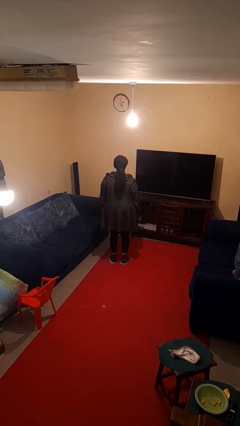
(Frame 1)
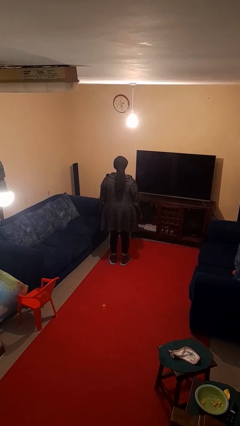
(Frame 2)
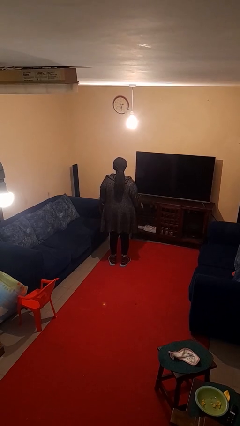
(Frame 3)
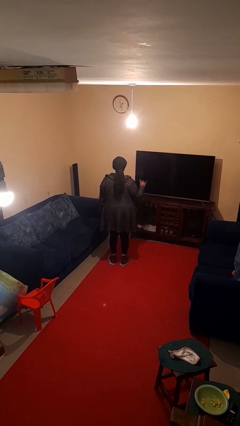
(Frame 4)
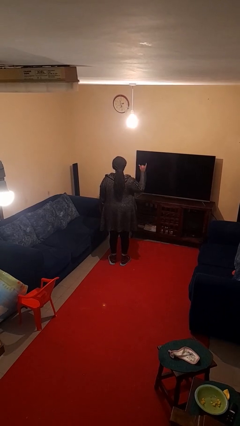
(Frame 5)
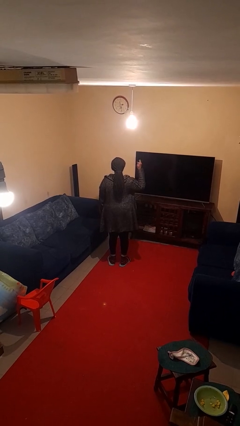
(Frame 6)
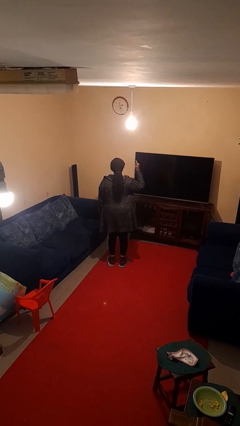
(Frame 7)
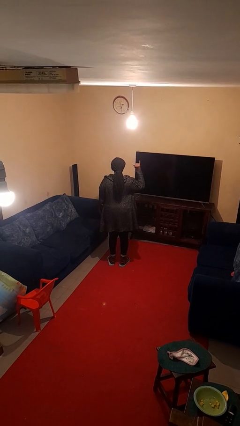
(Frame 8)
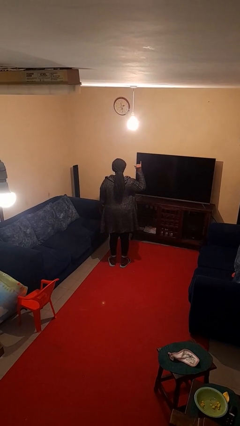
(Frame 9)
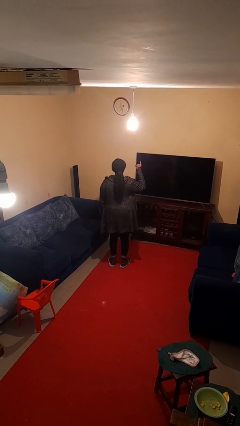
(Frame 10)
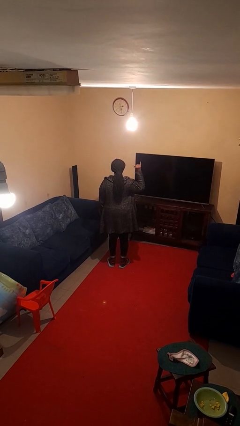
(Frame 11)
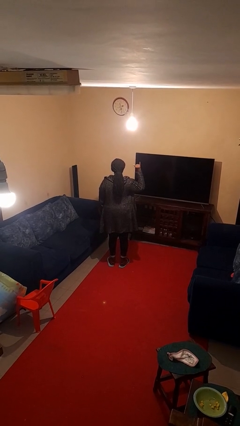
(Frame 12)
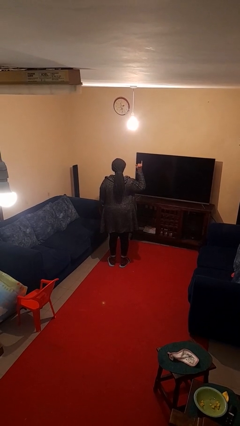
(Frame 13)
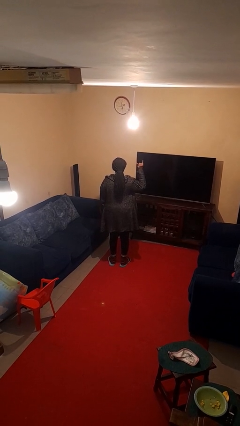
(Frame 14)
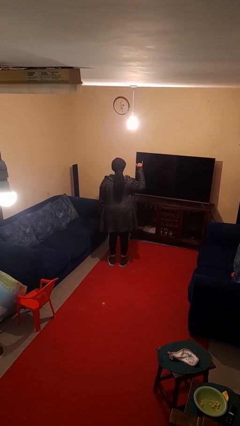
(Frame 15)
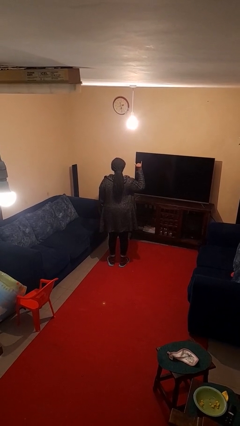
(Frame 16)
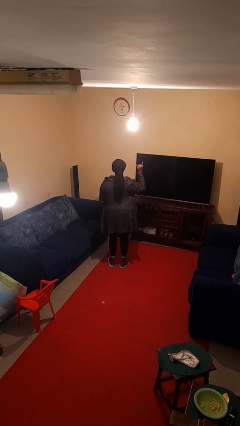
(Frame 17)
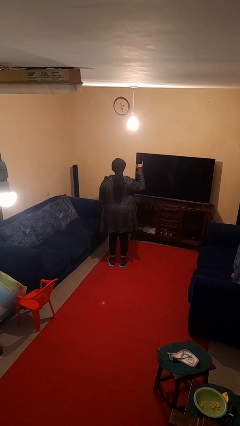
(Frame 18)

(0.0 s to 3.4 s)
person gestures hang loose

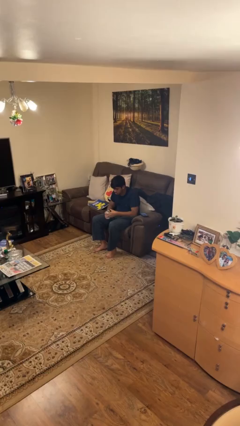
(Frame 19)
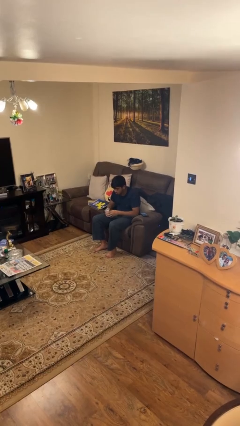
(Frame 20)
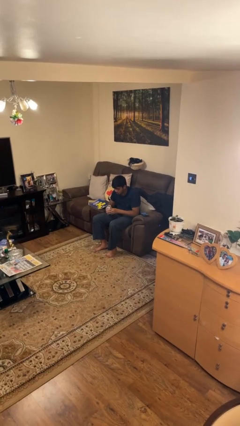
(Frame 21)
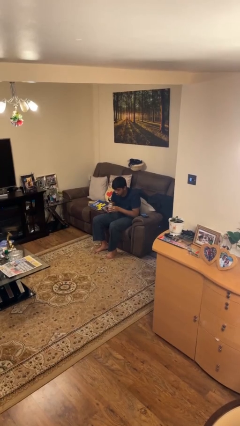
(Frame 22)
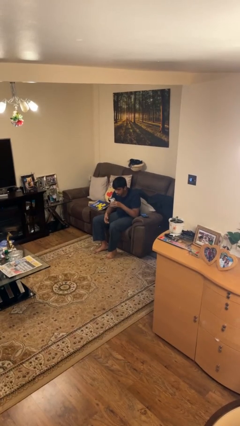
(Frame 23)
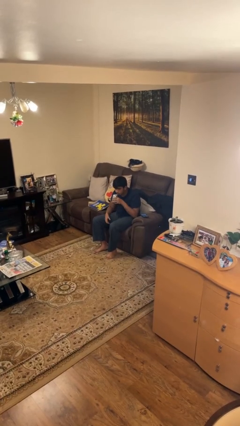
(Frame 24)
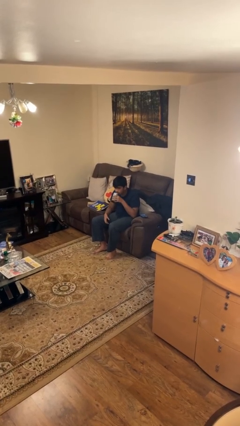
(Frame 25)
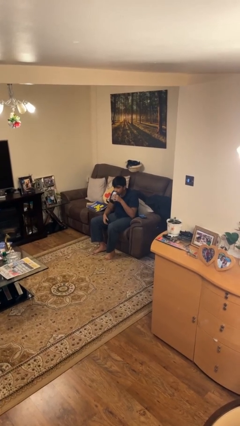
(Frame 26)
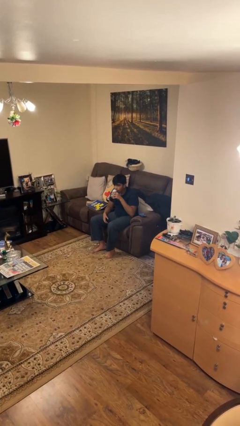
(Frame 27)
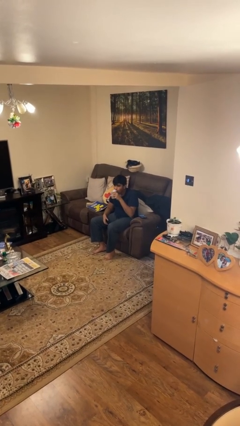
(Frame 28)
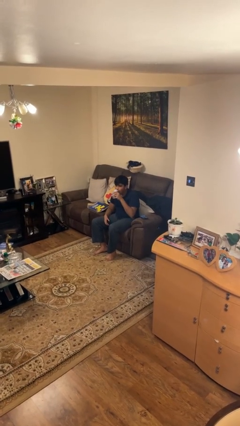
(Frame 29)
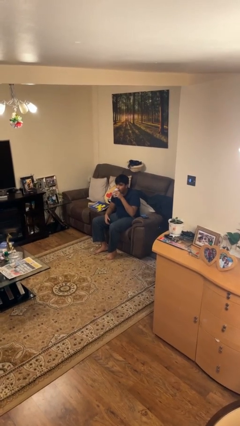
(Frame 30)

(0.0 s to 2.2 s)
person drinks from beverage can

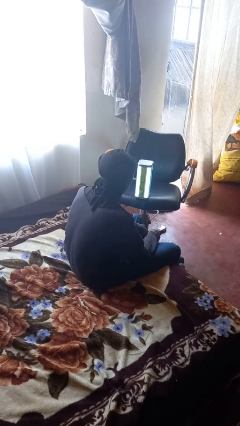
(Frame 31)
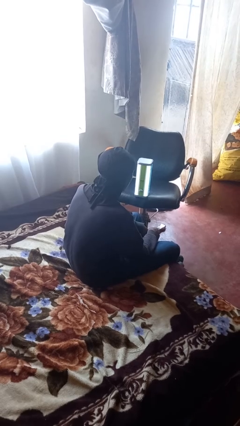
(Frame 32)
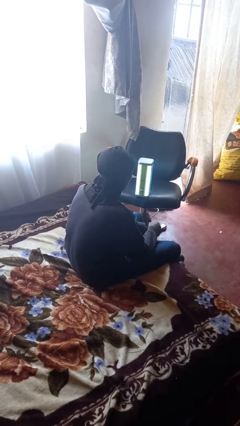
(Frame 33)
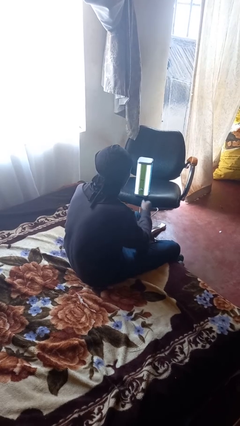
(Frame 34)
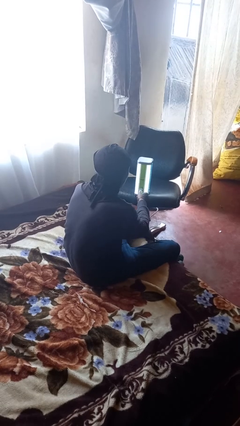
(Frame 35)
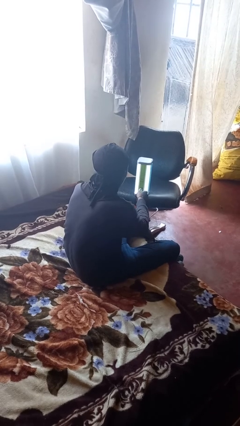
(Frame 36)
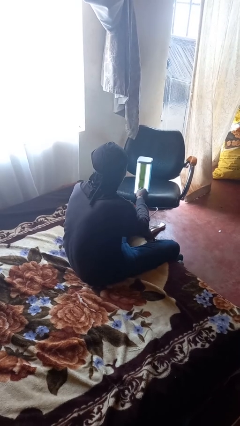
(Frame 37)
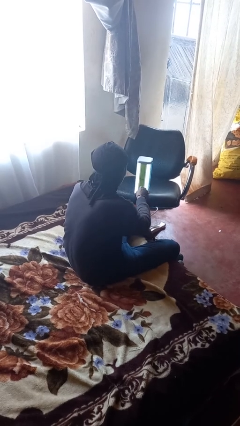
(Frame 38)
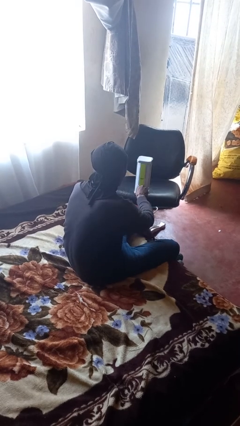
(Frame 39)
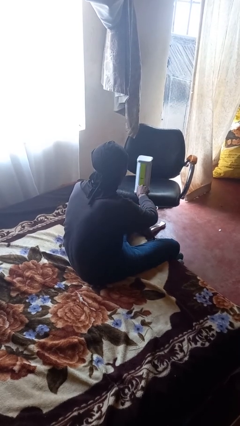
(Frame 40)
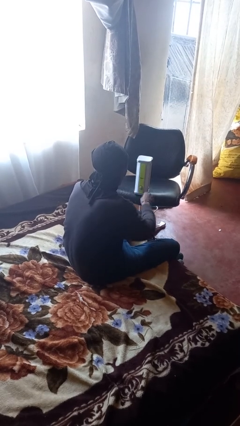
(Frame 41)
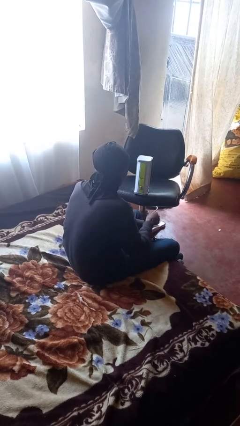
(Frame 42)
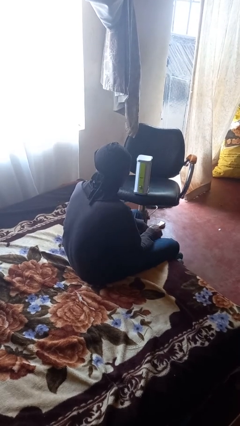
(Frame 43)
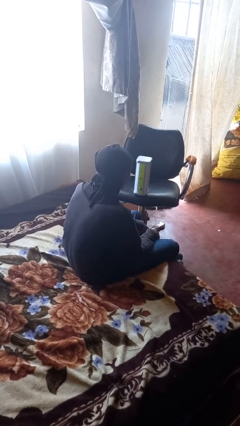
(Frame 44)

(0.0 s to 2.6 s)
person turns off lamp

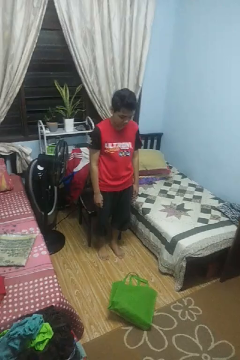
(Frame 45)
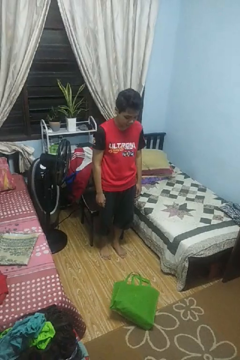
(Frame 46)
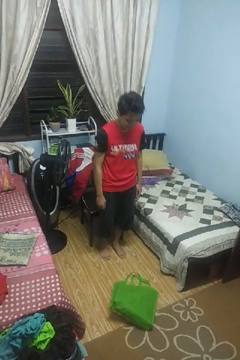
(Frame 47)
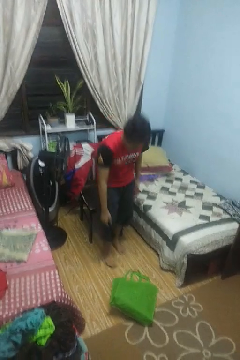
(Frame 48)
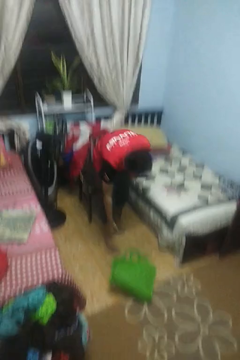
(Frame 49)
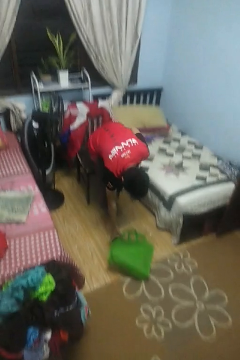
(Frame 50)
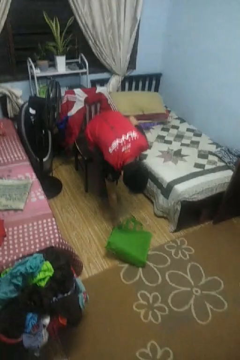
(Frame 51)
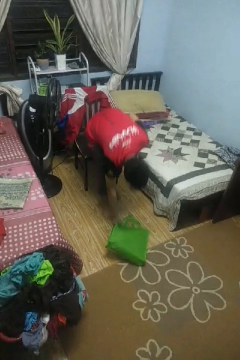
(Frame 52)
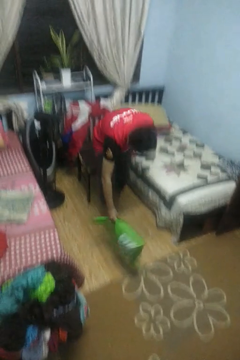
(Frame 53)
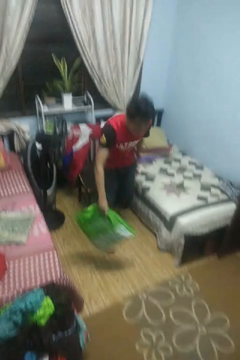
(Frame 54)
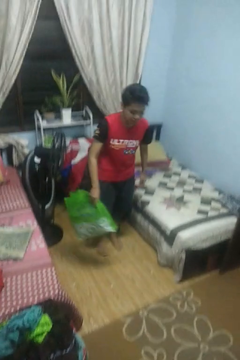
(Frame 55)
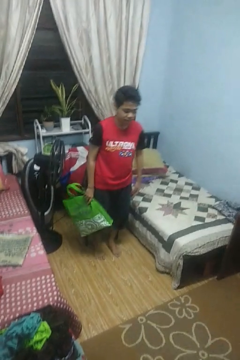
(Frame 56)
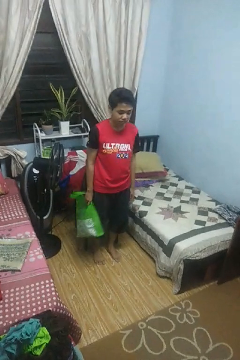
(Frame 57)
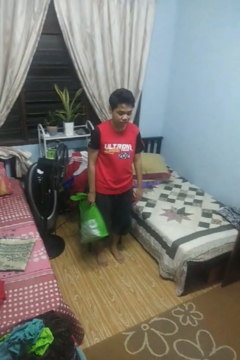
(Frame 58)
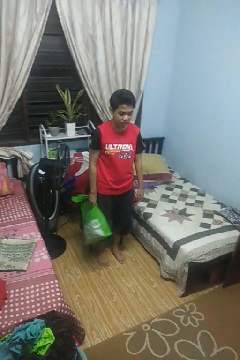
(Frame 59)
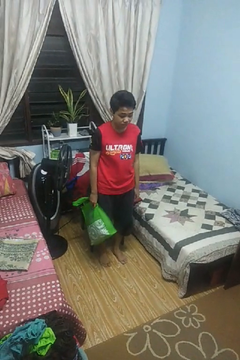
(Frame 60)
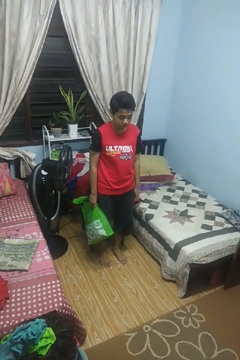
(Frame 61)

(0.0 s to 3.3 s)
person picks up object from floor

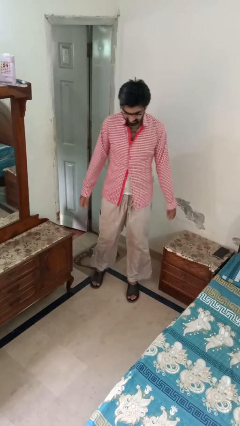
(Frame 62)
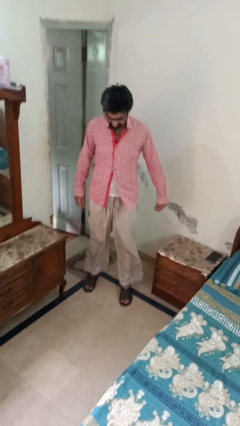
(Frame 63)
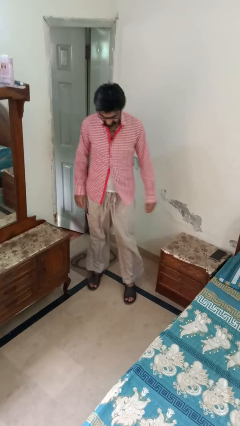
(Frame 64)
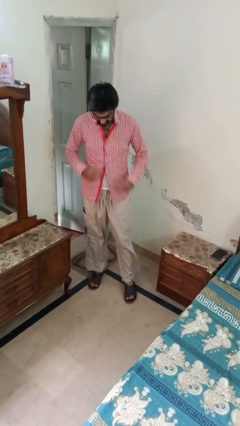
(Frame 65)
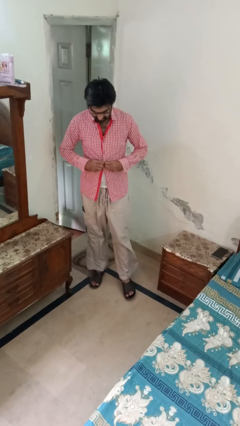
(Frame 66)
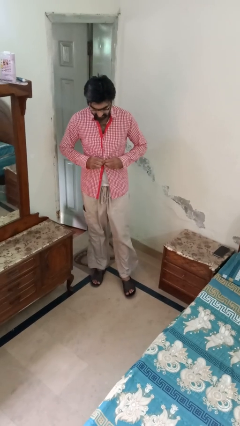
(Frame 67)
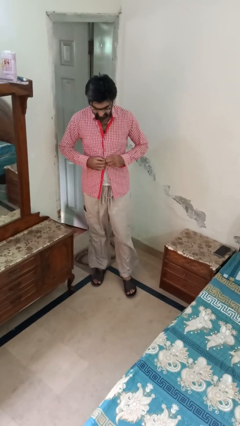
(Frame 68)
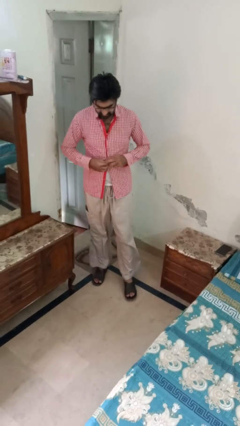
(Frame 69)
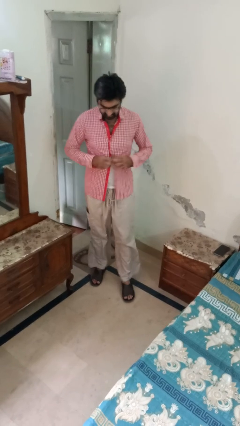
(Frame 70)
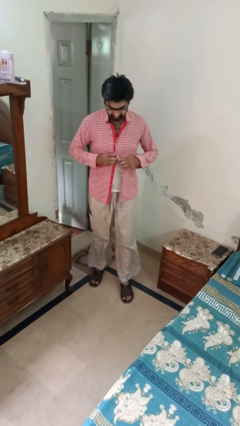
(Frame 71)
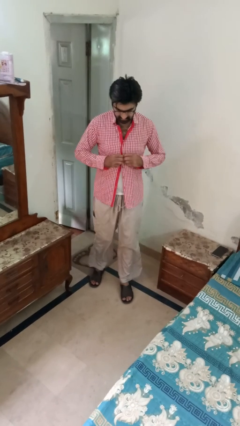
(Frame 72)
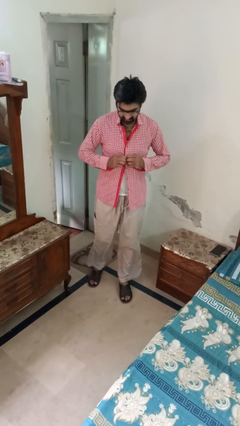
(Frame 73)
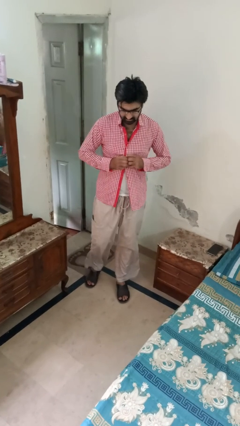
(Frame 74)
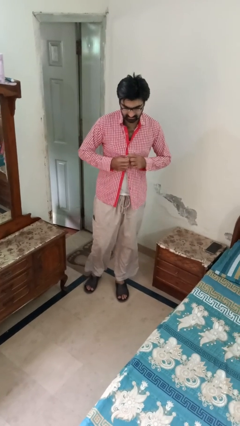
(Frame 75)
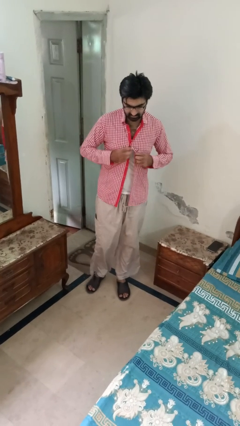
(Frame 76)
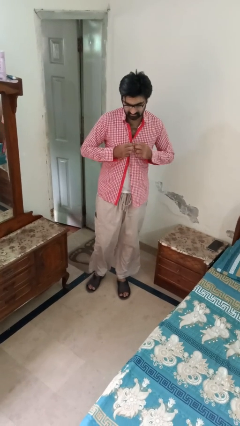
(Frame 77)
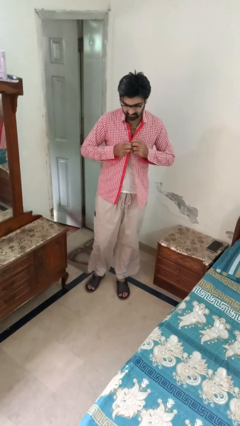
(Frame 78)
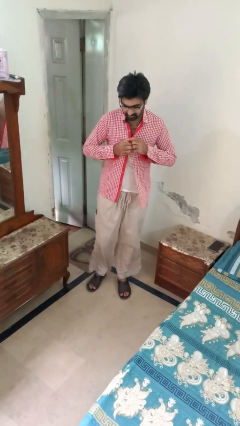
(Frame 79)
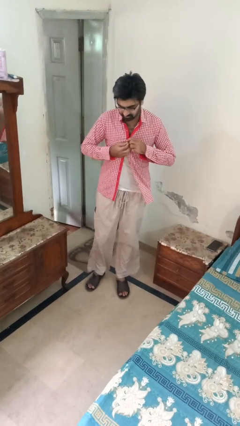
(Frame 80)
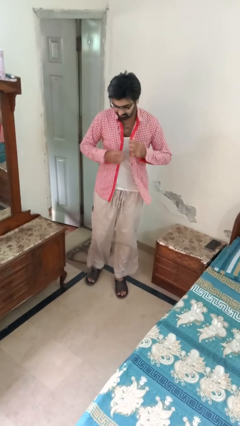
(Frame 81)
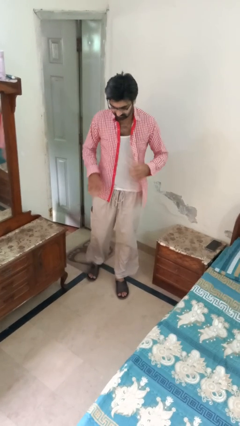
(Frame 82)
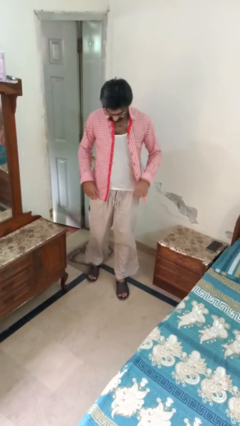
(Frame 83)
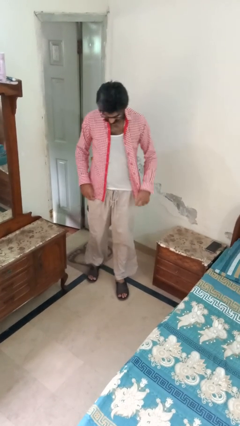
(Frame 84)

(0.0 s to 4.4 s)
person unbuttons shirt

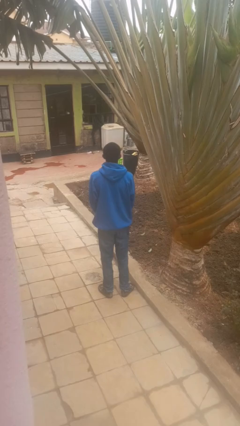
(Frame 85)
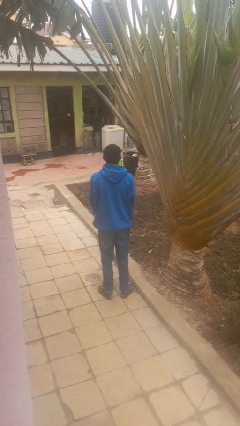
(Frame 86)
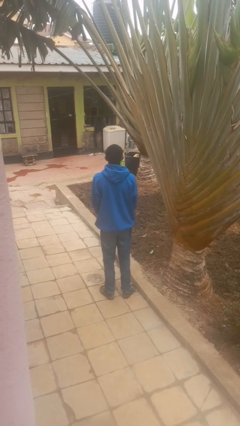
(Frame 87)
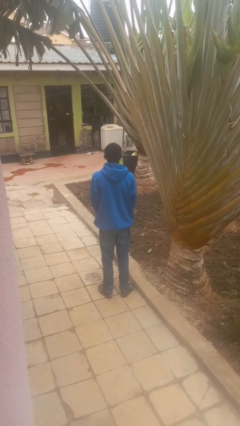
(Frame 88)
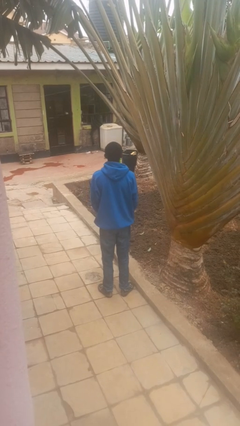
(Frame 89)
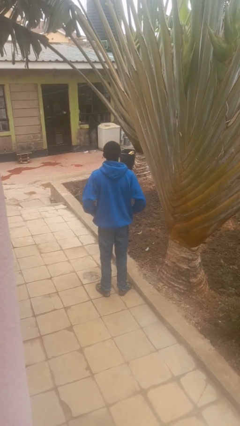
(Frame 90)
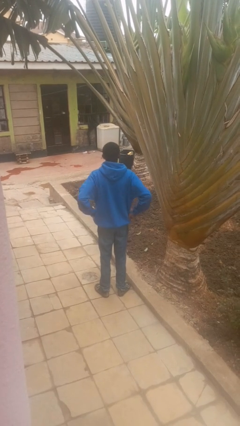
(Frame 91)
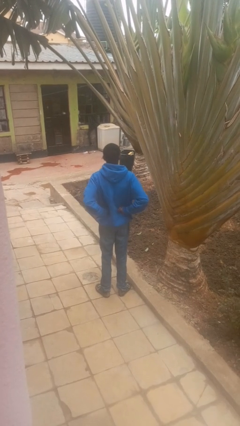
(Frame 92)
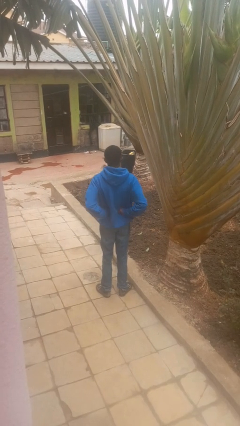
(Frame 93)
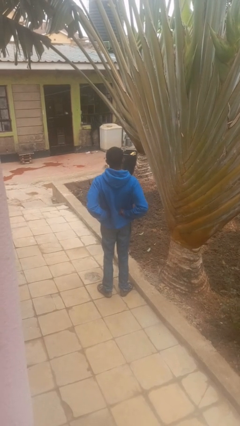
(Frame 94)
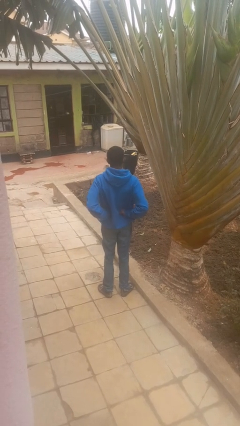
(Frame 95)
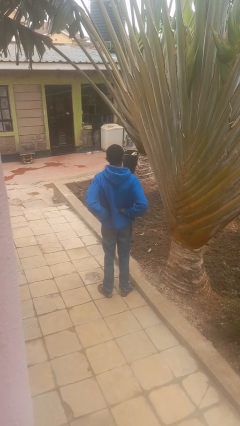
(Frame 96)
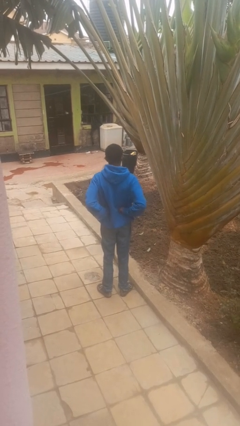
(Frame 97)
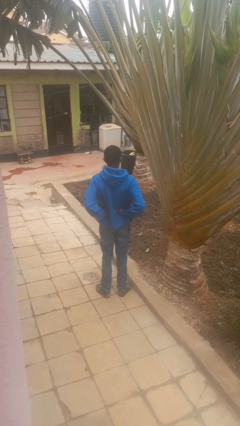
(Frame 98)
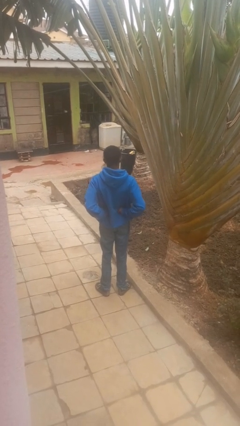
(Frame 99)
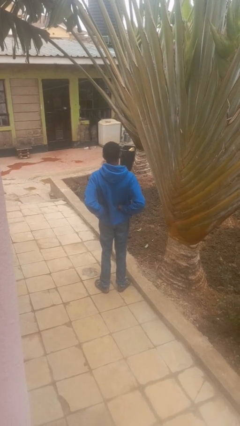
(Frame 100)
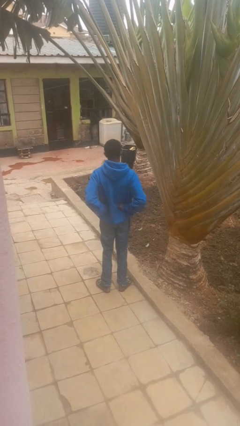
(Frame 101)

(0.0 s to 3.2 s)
person stretches back
